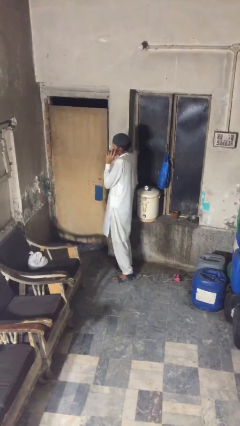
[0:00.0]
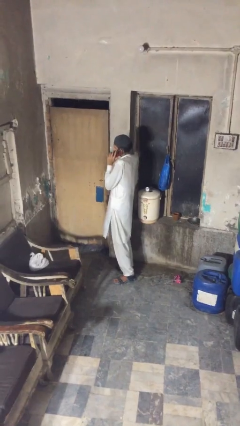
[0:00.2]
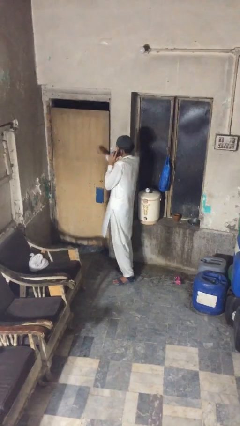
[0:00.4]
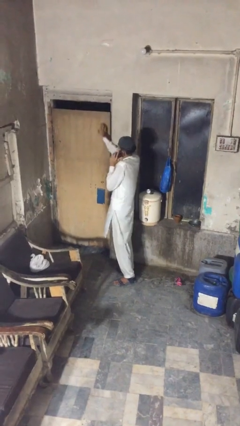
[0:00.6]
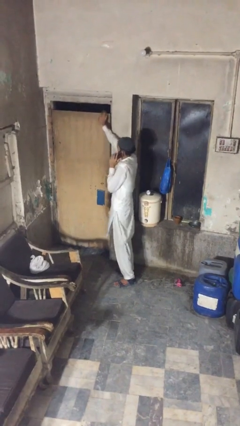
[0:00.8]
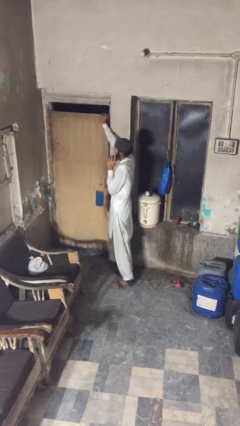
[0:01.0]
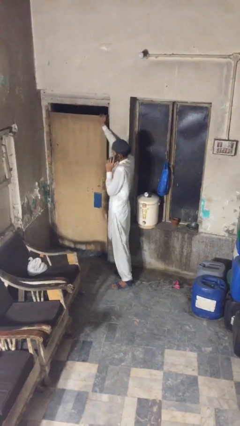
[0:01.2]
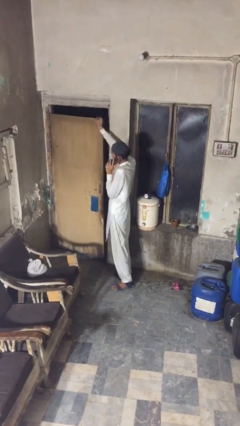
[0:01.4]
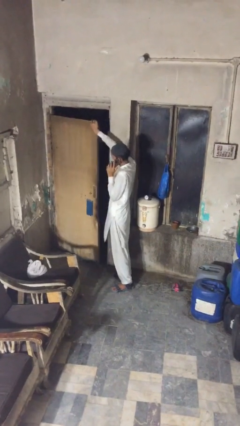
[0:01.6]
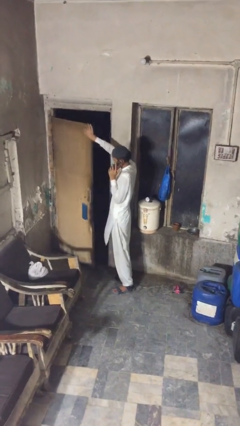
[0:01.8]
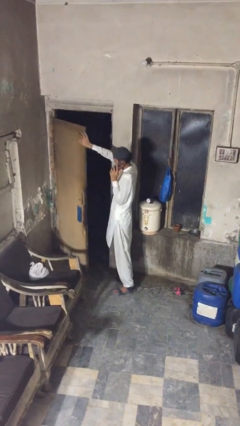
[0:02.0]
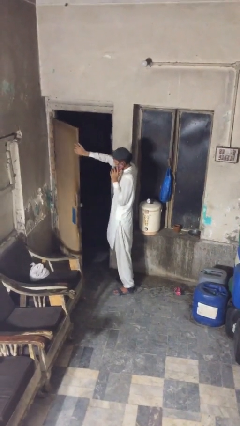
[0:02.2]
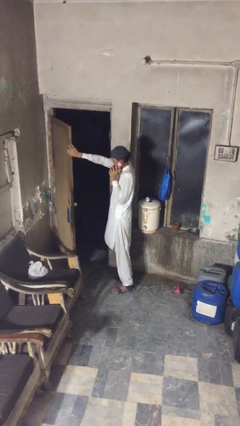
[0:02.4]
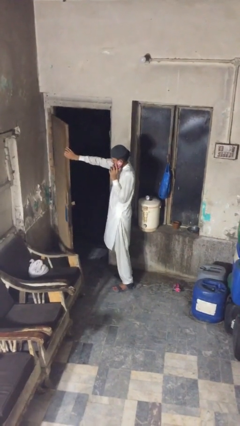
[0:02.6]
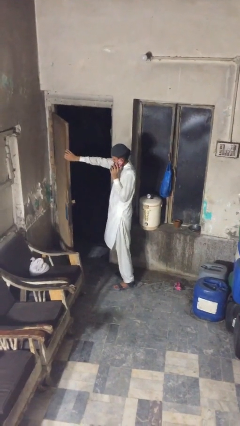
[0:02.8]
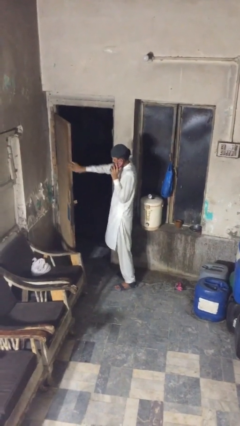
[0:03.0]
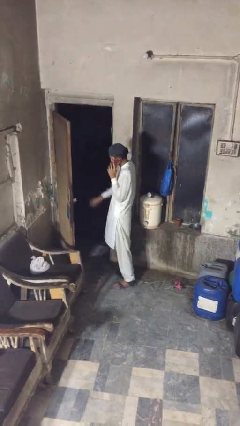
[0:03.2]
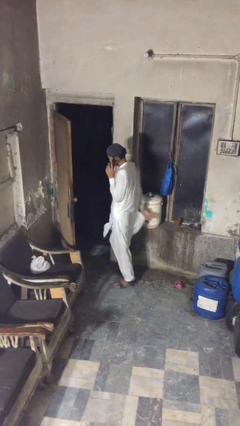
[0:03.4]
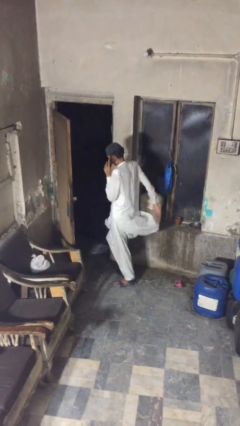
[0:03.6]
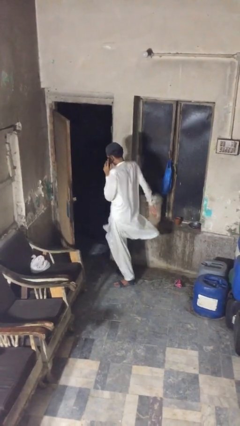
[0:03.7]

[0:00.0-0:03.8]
person opens facility door

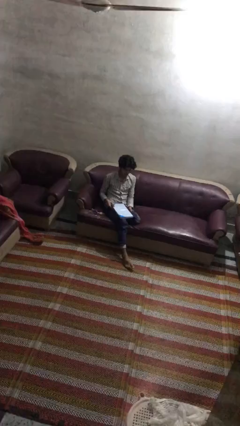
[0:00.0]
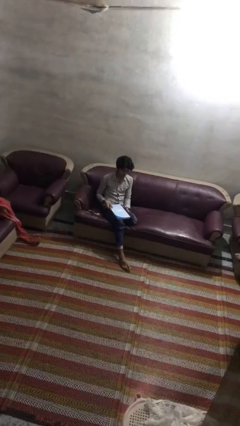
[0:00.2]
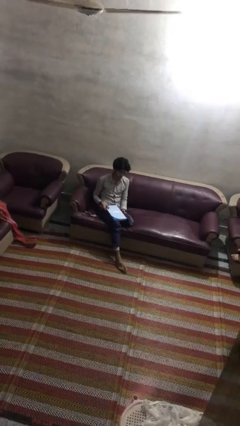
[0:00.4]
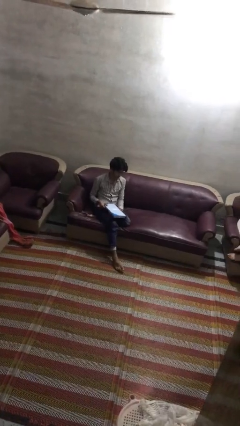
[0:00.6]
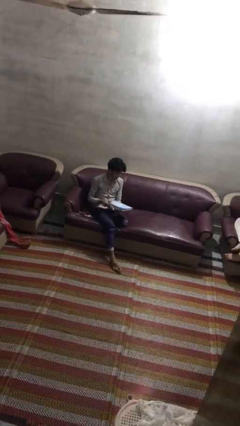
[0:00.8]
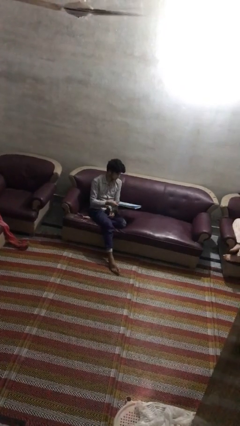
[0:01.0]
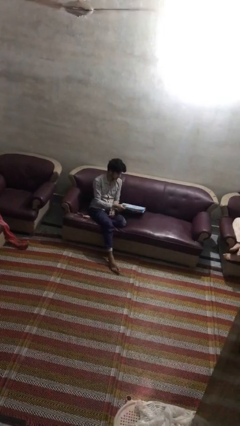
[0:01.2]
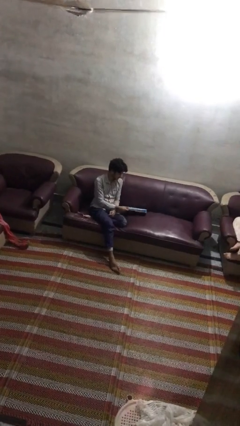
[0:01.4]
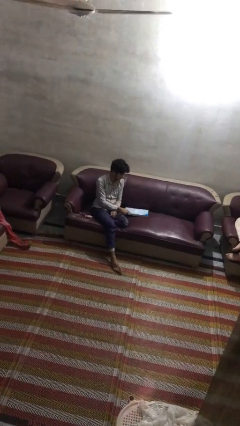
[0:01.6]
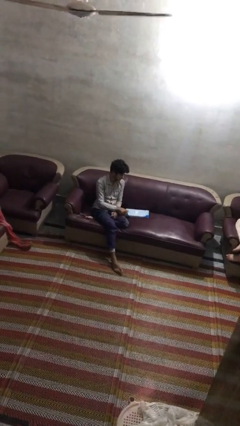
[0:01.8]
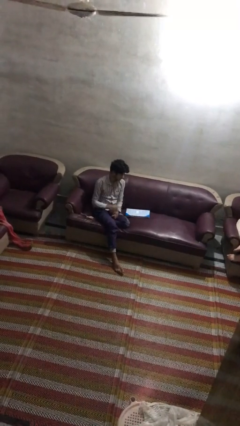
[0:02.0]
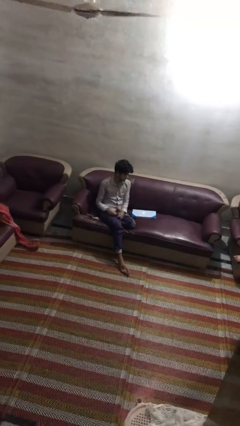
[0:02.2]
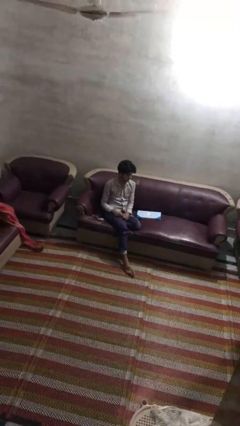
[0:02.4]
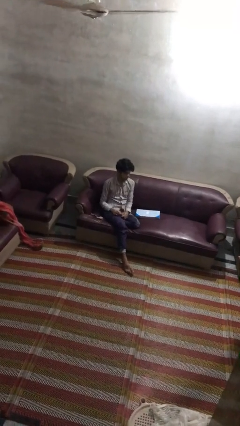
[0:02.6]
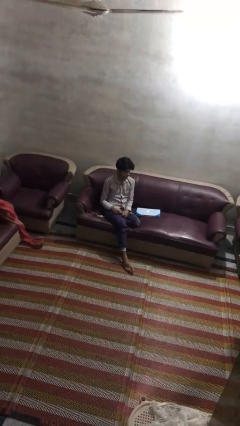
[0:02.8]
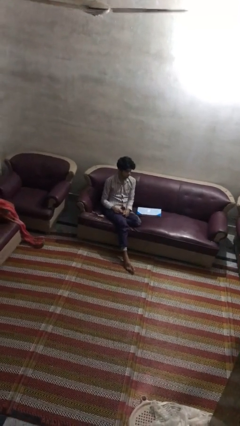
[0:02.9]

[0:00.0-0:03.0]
person puts down object on couch

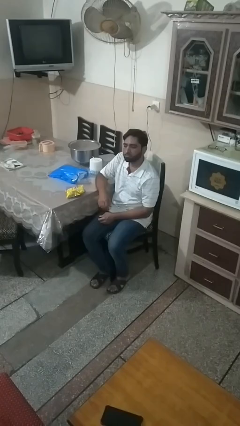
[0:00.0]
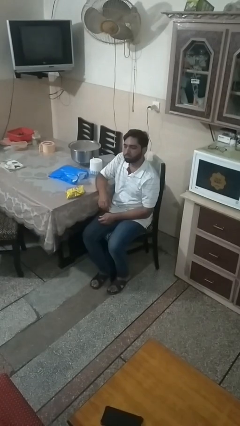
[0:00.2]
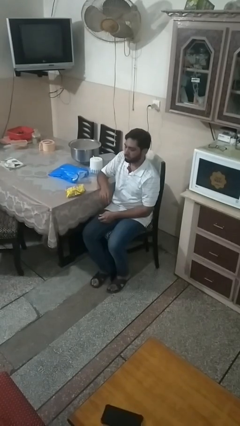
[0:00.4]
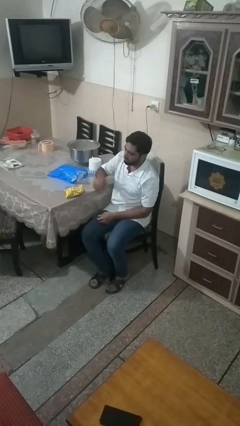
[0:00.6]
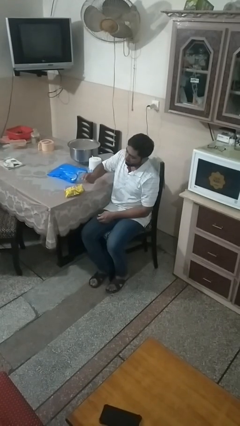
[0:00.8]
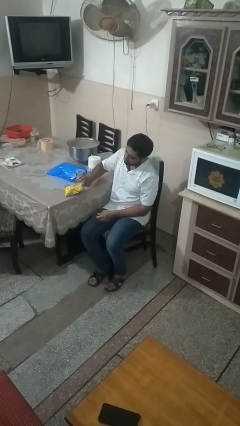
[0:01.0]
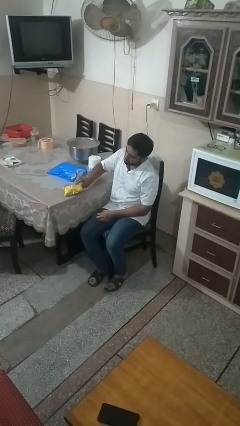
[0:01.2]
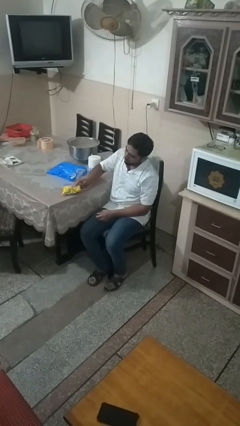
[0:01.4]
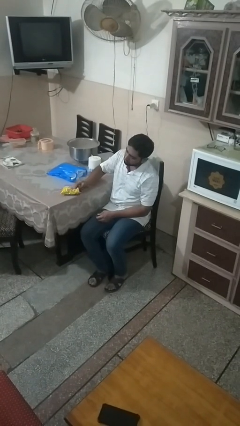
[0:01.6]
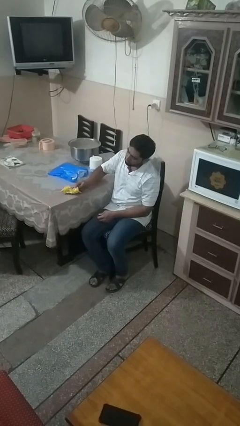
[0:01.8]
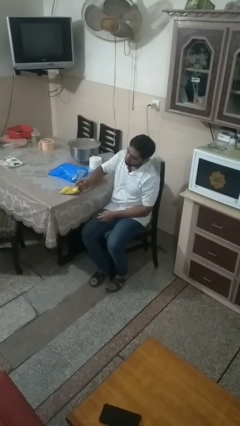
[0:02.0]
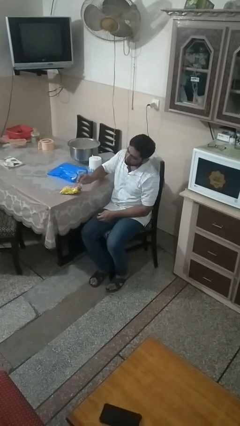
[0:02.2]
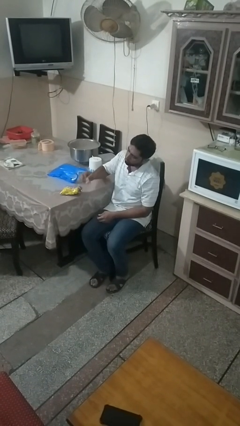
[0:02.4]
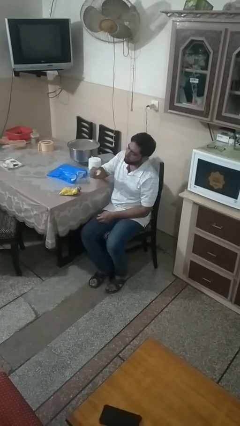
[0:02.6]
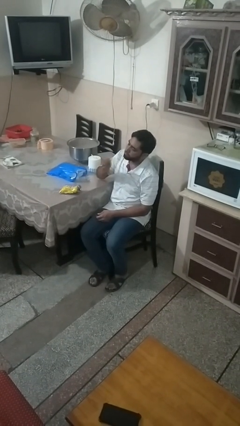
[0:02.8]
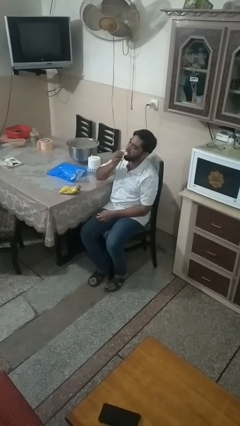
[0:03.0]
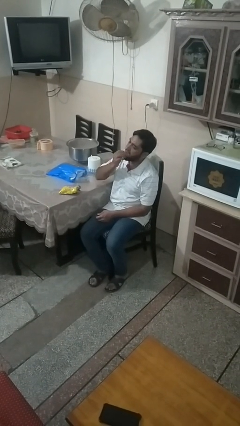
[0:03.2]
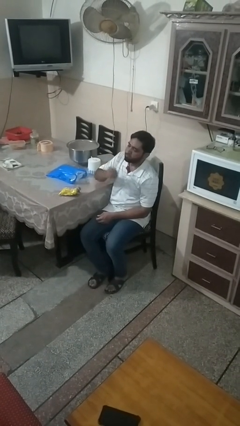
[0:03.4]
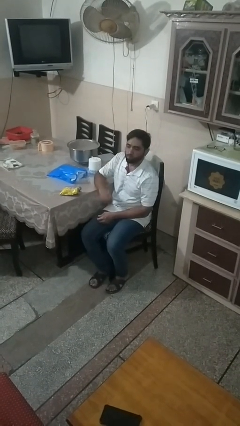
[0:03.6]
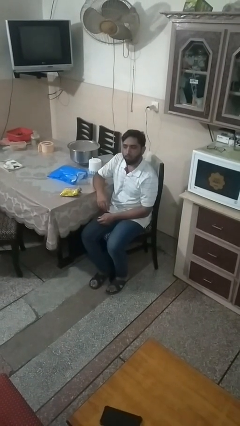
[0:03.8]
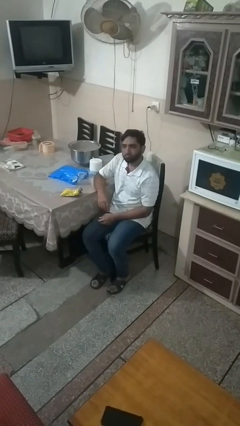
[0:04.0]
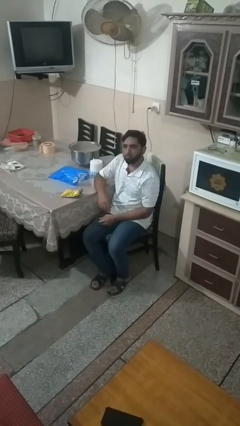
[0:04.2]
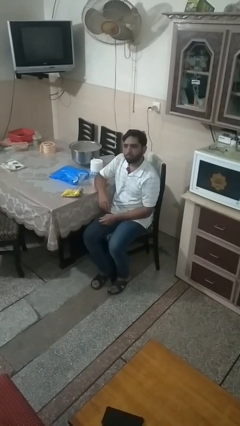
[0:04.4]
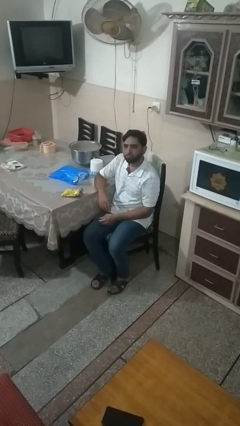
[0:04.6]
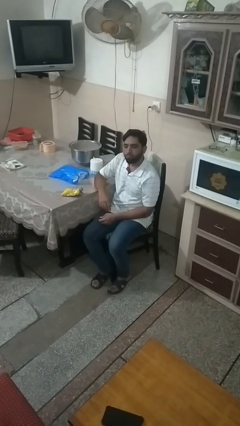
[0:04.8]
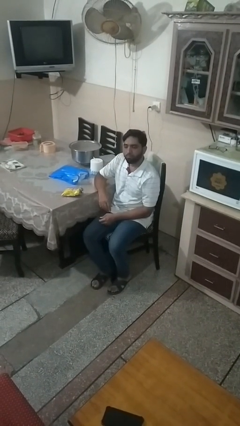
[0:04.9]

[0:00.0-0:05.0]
person eats snack from bag

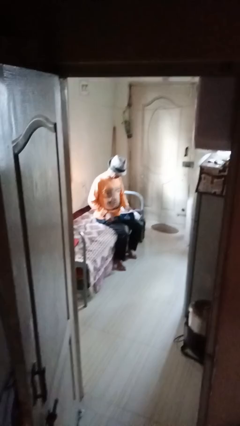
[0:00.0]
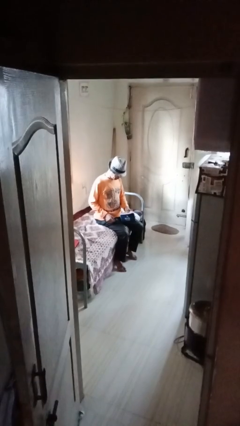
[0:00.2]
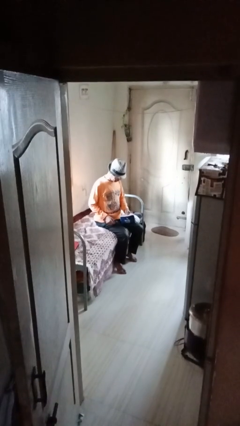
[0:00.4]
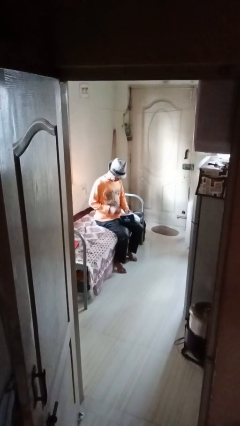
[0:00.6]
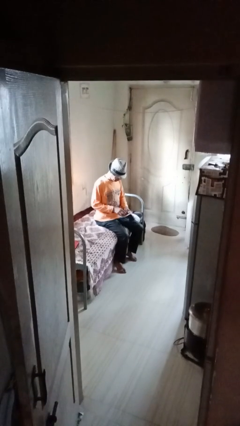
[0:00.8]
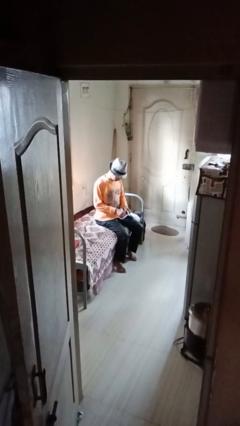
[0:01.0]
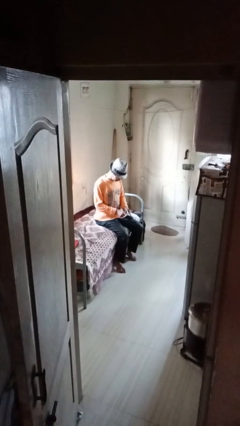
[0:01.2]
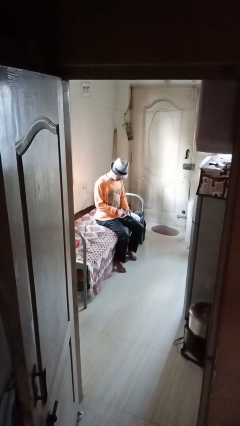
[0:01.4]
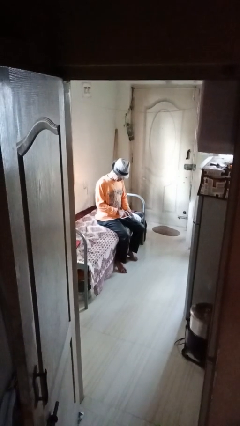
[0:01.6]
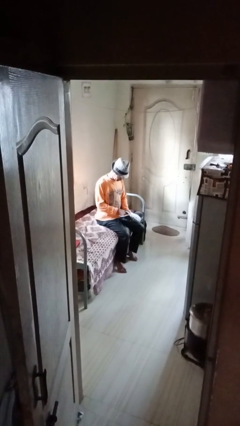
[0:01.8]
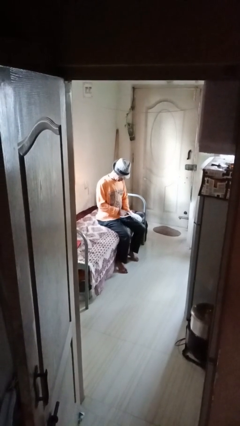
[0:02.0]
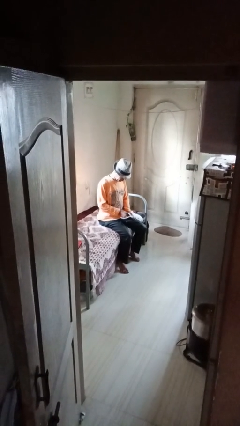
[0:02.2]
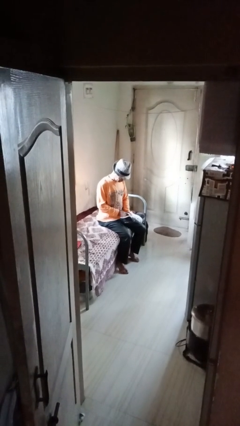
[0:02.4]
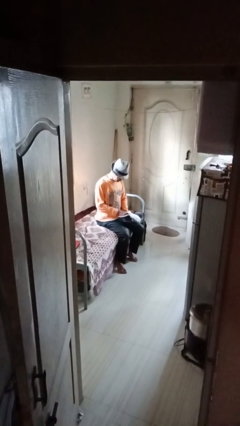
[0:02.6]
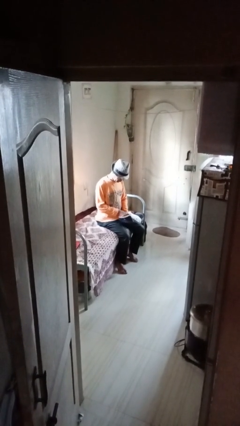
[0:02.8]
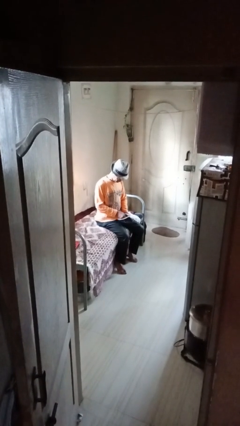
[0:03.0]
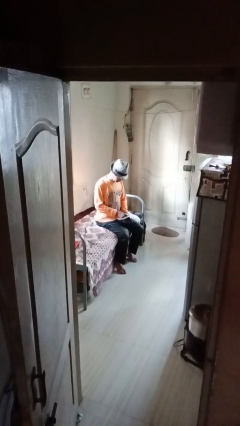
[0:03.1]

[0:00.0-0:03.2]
person searches in purse

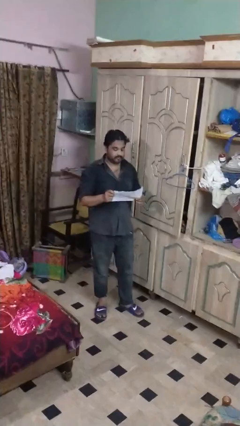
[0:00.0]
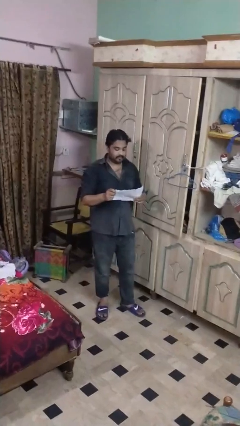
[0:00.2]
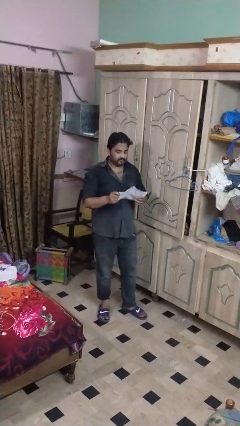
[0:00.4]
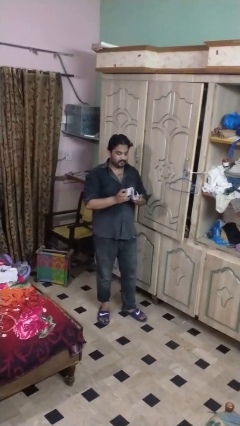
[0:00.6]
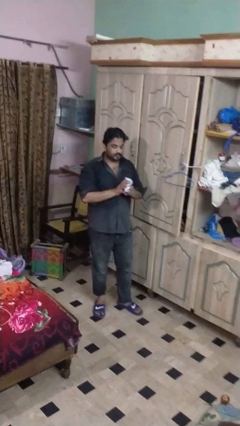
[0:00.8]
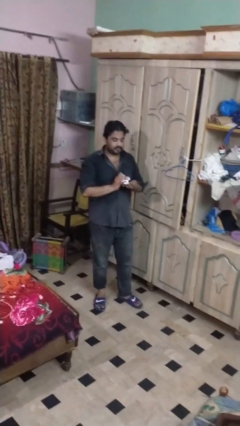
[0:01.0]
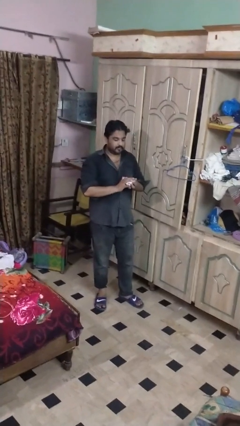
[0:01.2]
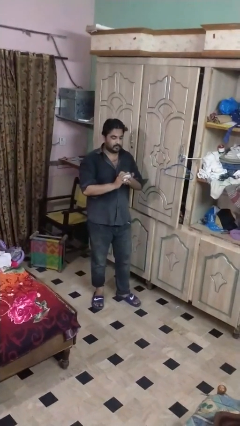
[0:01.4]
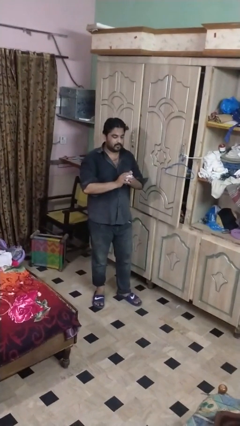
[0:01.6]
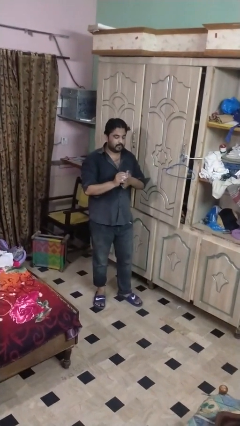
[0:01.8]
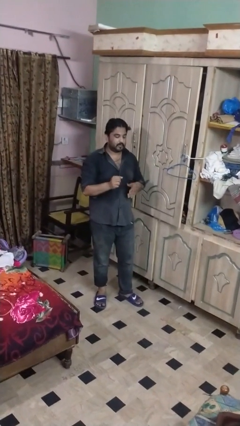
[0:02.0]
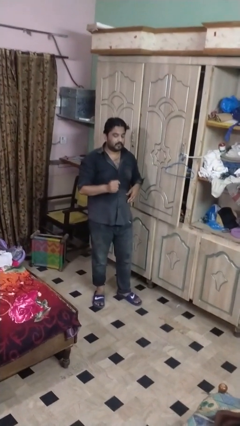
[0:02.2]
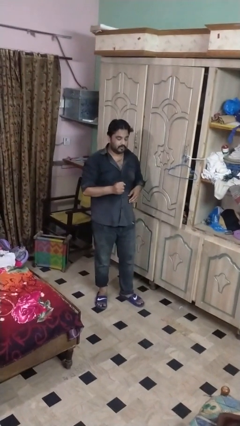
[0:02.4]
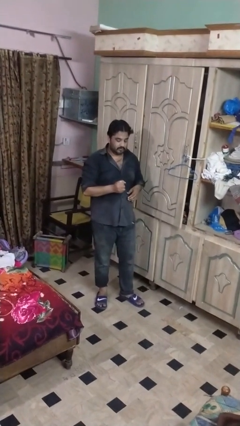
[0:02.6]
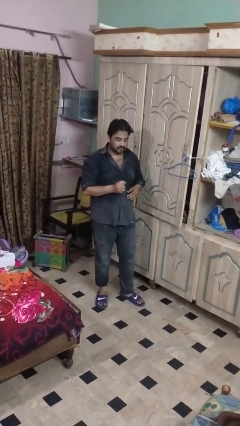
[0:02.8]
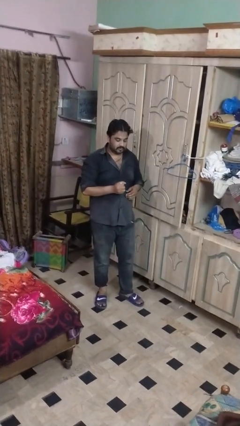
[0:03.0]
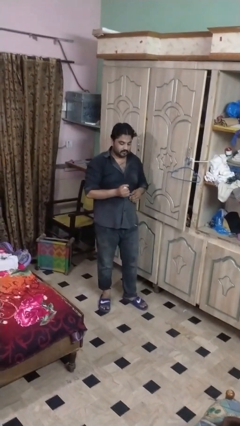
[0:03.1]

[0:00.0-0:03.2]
person crumples paper
